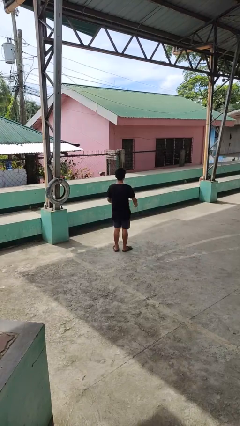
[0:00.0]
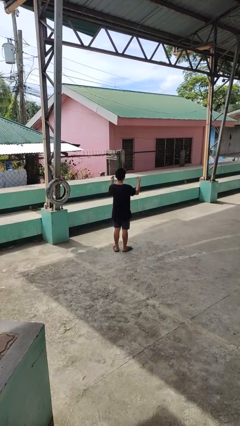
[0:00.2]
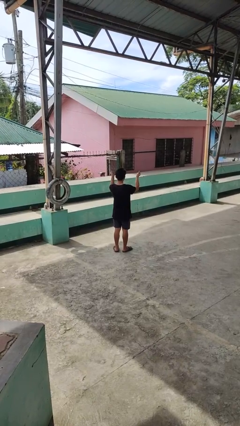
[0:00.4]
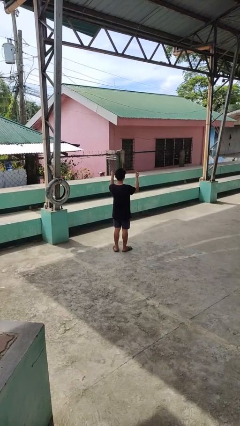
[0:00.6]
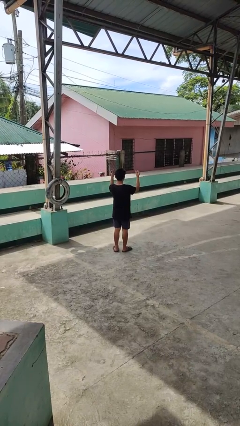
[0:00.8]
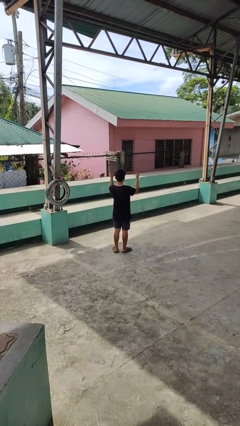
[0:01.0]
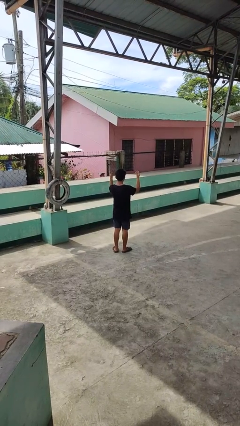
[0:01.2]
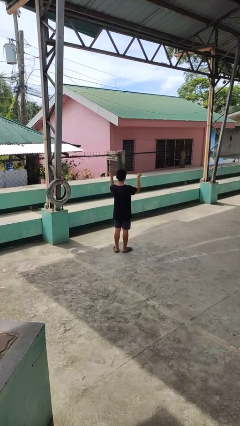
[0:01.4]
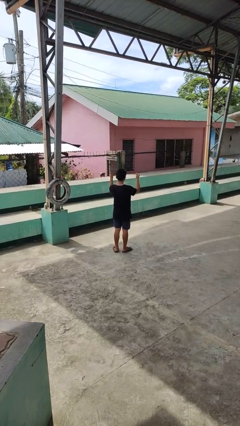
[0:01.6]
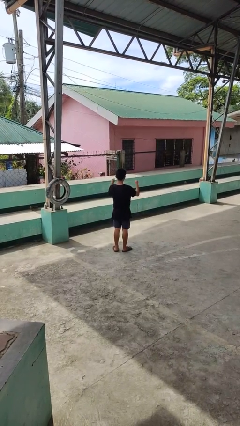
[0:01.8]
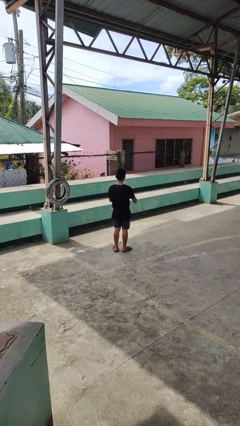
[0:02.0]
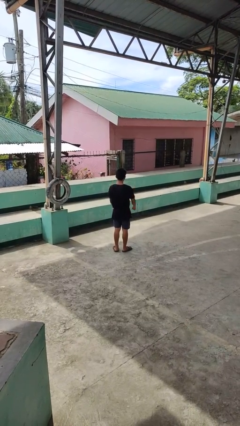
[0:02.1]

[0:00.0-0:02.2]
person snaps fingers

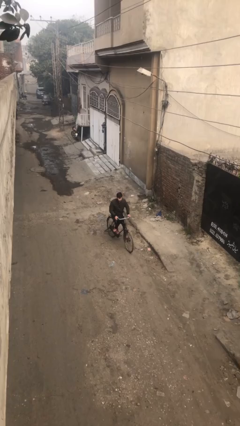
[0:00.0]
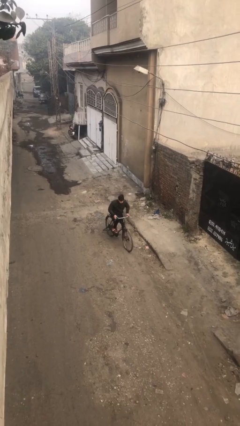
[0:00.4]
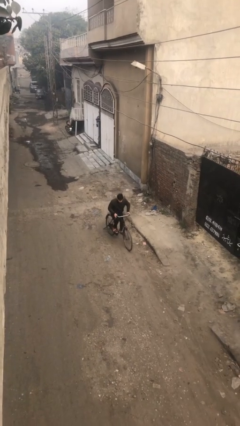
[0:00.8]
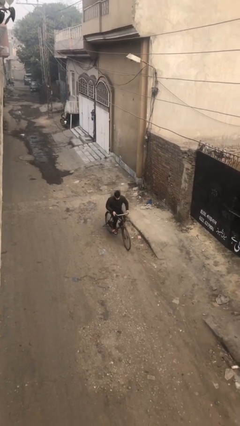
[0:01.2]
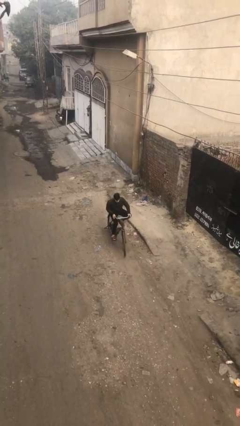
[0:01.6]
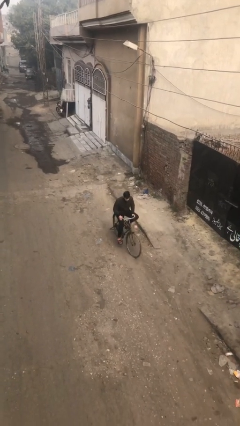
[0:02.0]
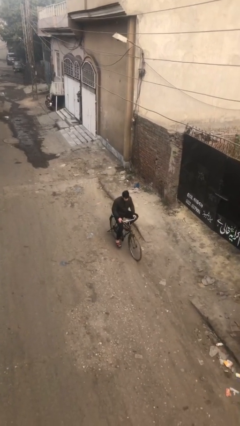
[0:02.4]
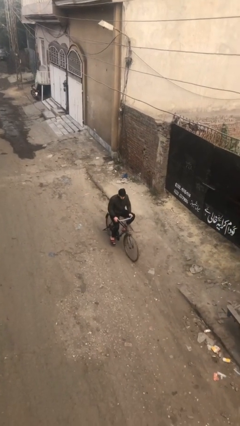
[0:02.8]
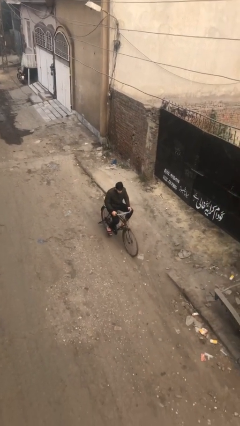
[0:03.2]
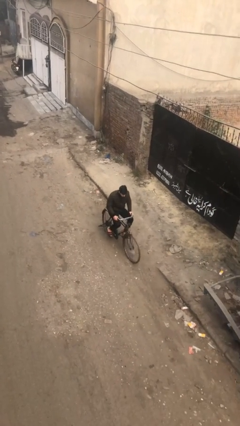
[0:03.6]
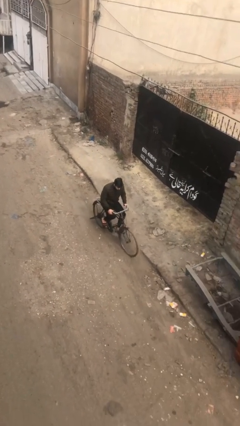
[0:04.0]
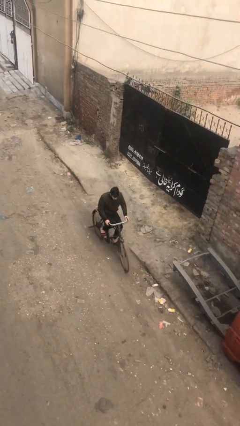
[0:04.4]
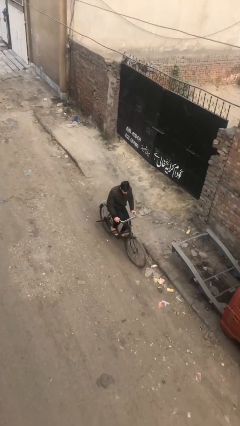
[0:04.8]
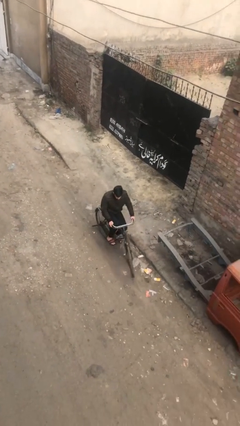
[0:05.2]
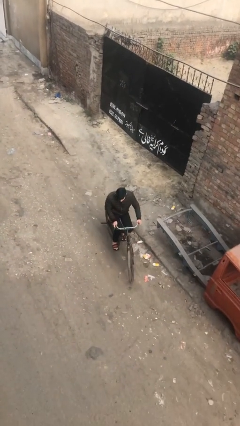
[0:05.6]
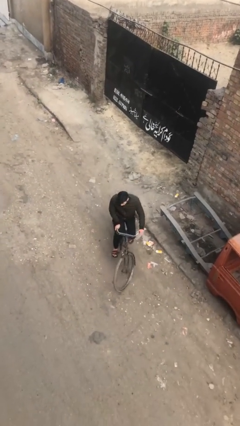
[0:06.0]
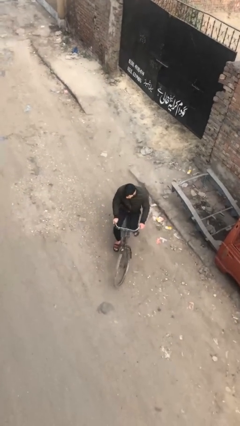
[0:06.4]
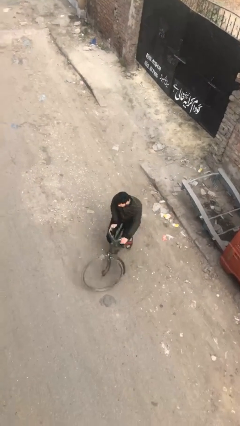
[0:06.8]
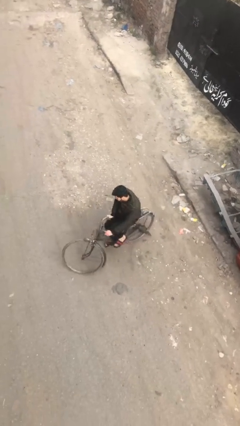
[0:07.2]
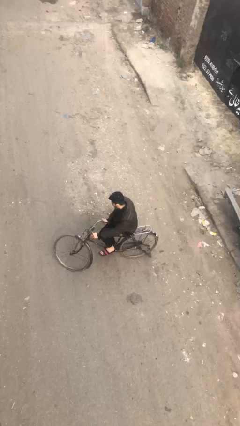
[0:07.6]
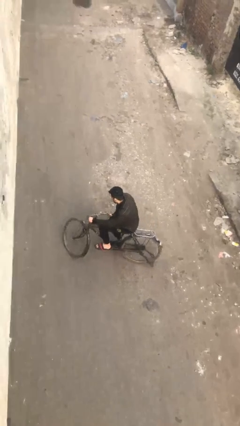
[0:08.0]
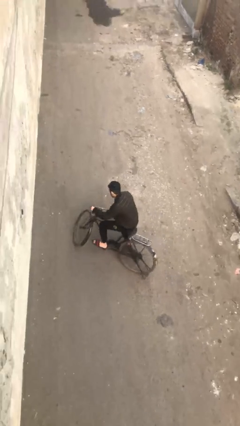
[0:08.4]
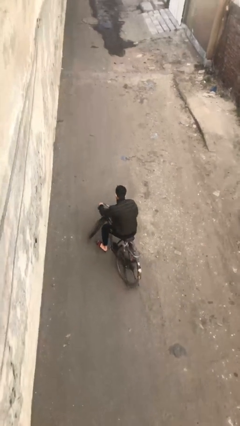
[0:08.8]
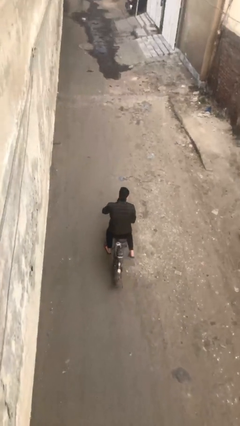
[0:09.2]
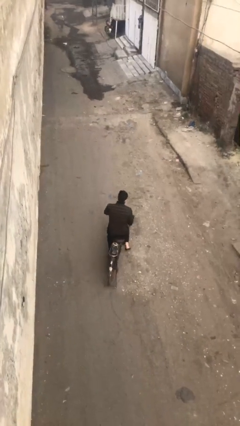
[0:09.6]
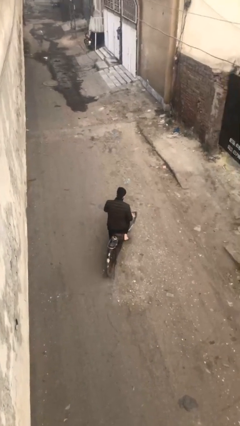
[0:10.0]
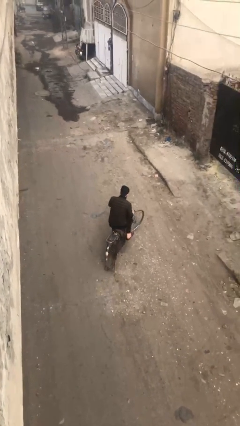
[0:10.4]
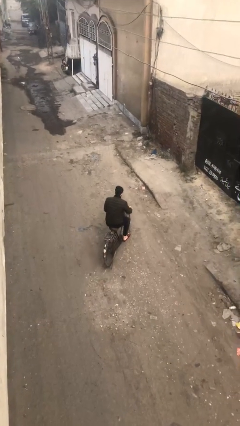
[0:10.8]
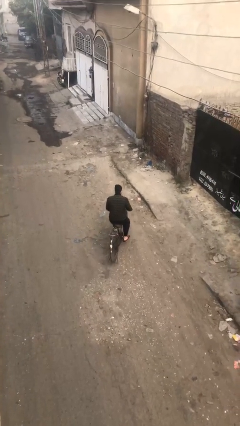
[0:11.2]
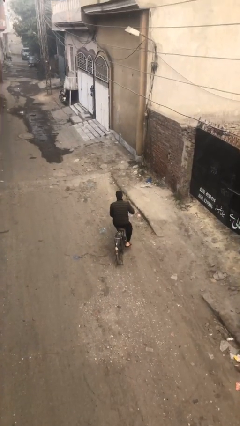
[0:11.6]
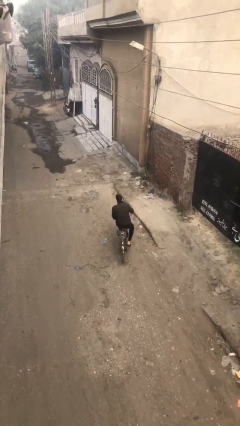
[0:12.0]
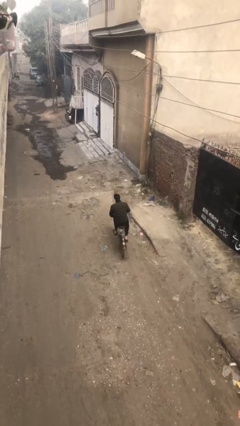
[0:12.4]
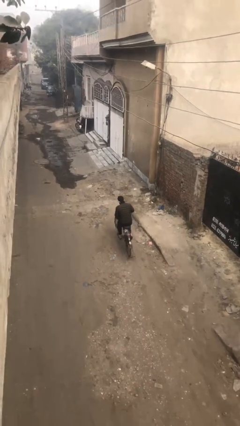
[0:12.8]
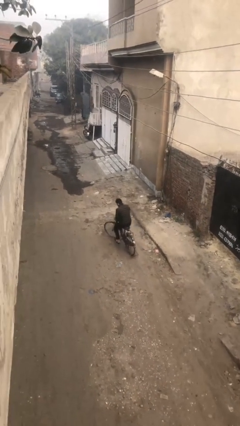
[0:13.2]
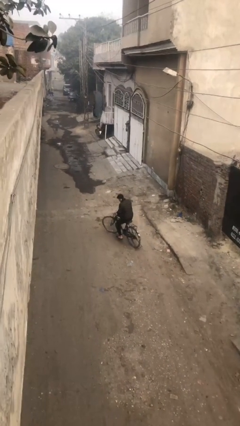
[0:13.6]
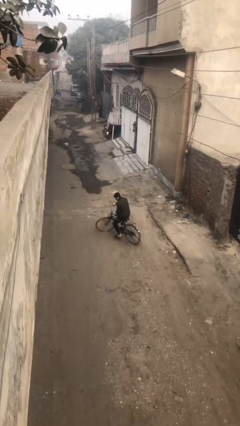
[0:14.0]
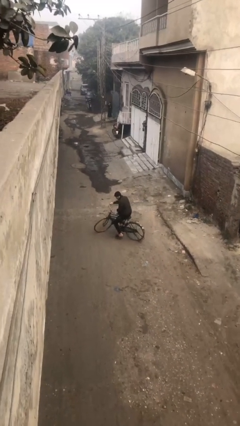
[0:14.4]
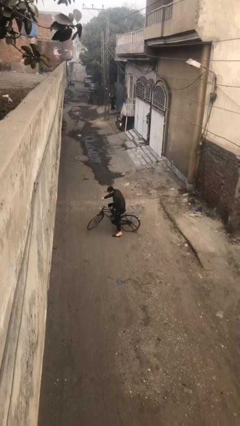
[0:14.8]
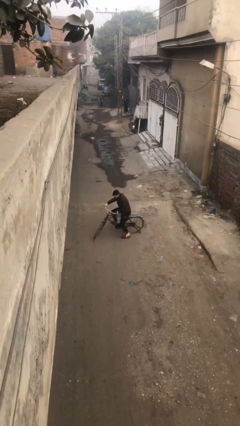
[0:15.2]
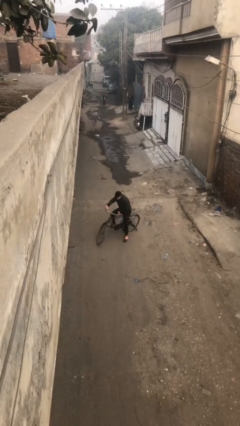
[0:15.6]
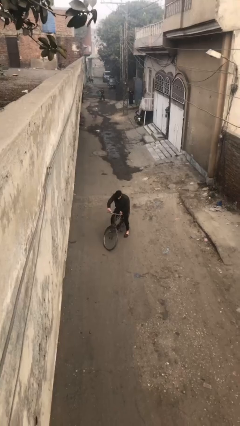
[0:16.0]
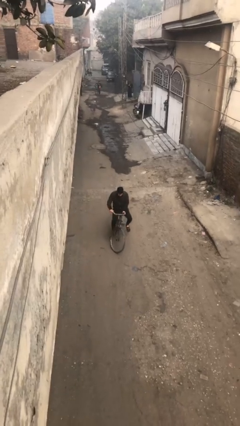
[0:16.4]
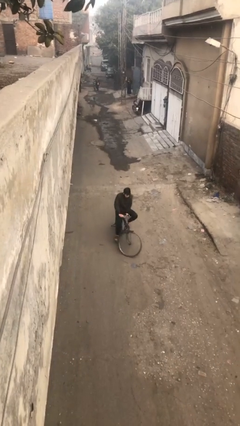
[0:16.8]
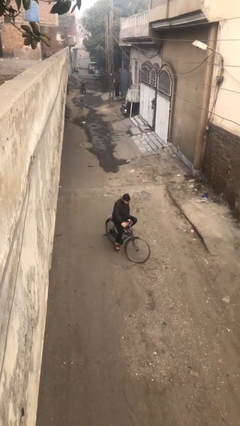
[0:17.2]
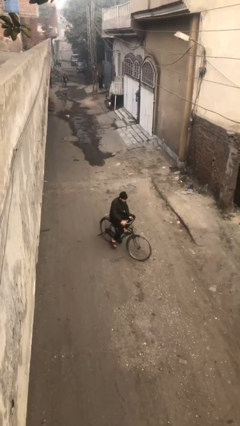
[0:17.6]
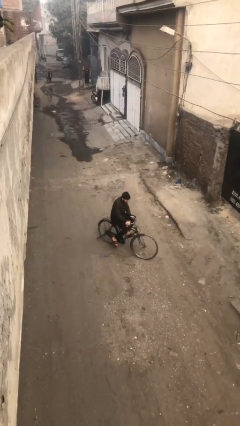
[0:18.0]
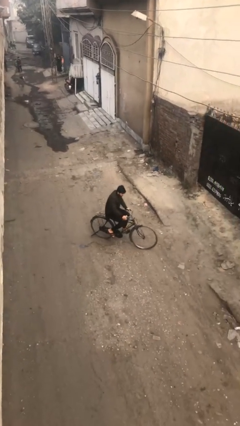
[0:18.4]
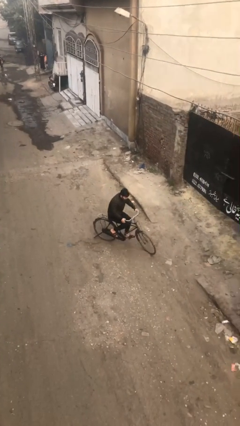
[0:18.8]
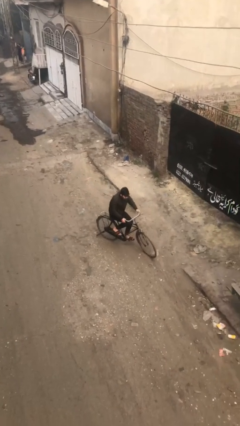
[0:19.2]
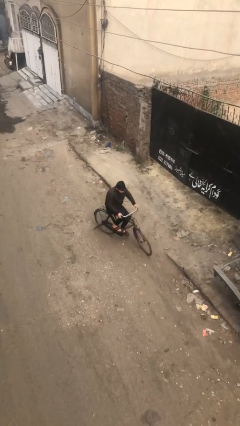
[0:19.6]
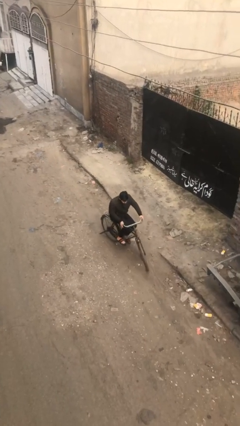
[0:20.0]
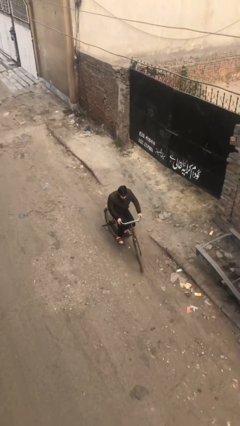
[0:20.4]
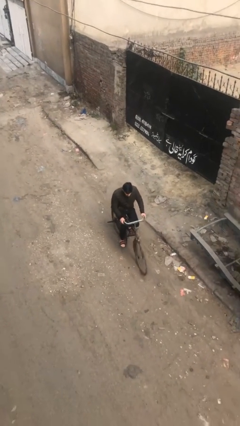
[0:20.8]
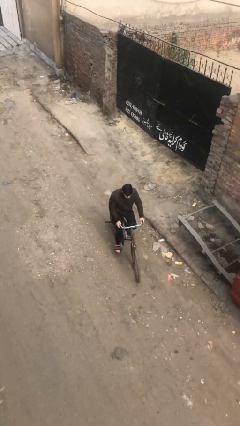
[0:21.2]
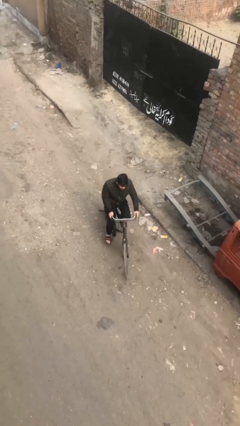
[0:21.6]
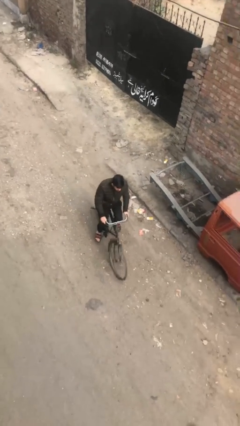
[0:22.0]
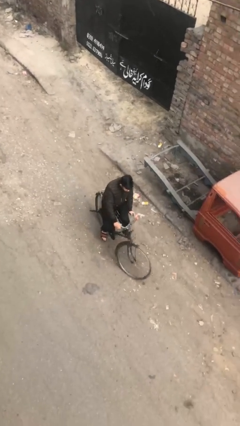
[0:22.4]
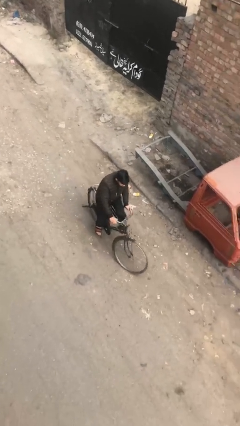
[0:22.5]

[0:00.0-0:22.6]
person rides bicycle

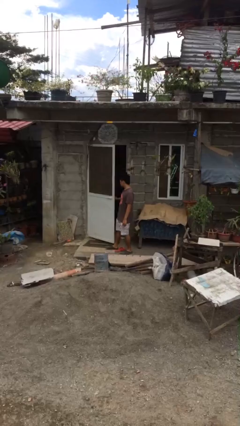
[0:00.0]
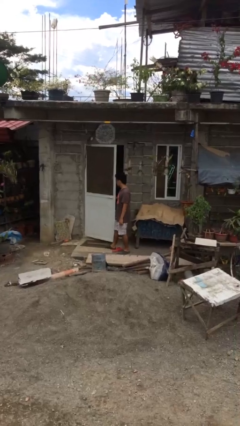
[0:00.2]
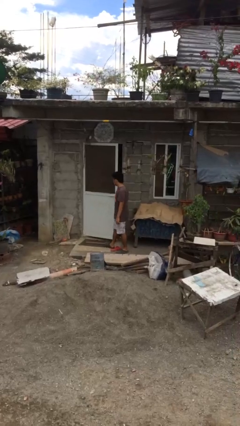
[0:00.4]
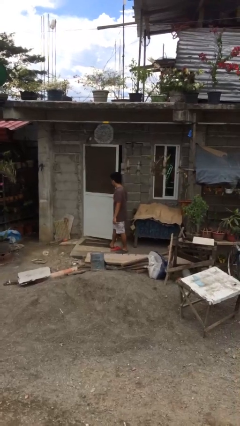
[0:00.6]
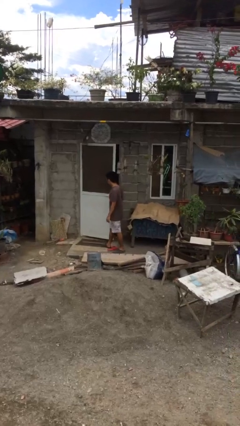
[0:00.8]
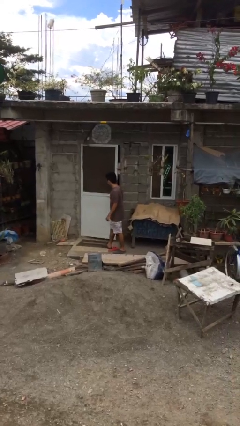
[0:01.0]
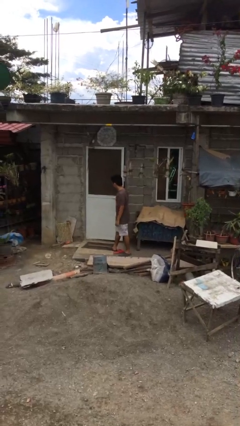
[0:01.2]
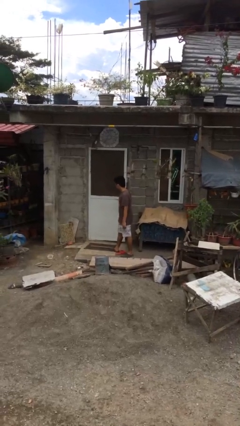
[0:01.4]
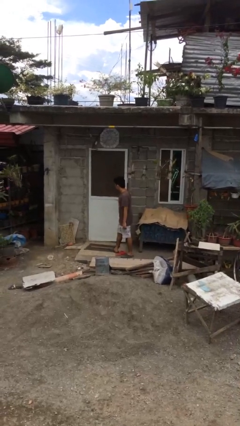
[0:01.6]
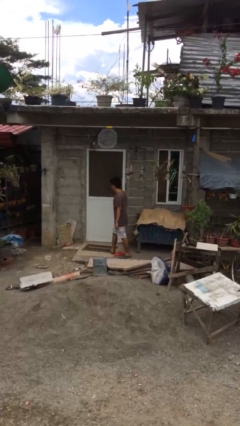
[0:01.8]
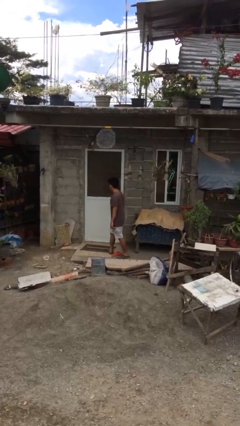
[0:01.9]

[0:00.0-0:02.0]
person closes facility door

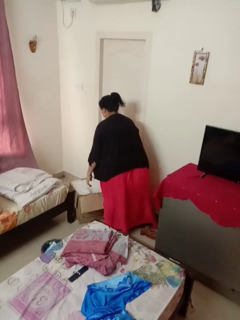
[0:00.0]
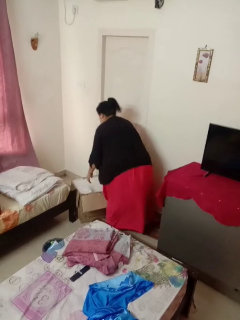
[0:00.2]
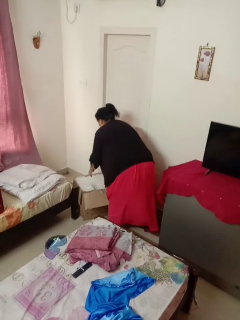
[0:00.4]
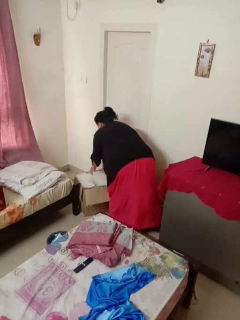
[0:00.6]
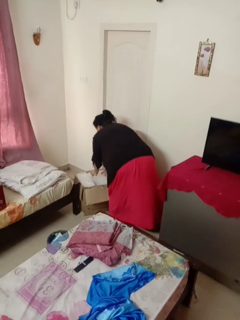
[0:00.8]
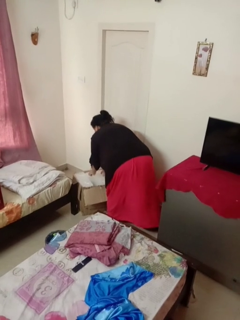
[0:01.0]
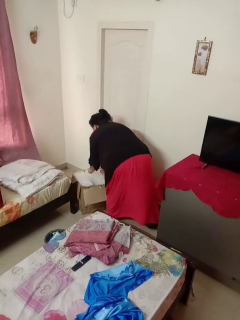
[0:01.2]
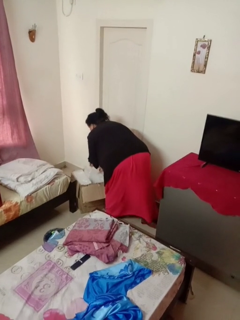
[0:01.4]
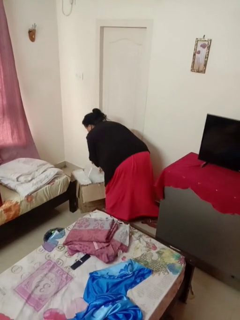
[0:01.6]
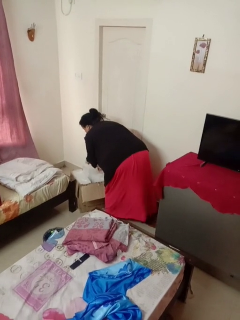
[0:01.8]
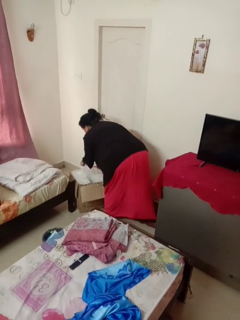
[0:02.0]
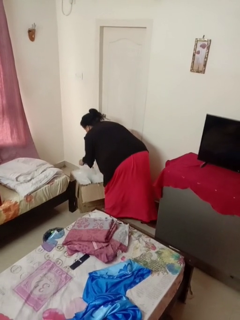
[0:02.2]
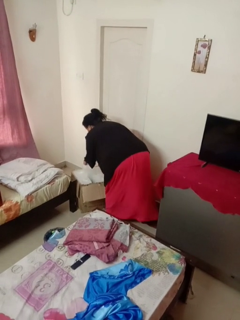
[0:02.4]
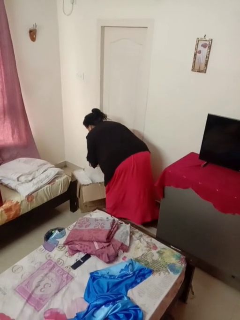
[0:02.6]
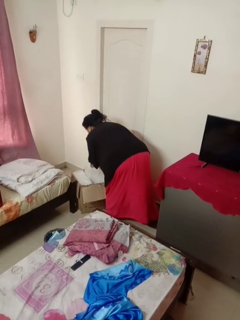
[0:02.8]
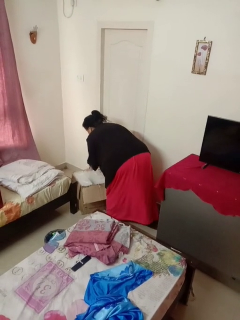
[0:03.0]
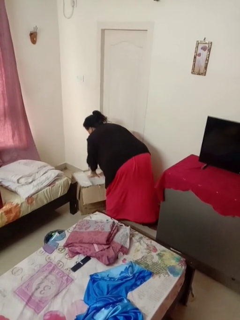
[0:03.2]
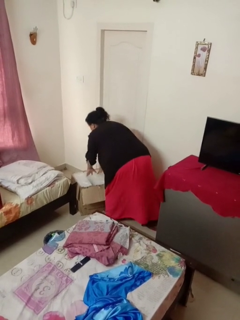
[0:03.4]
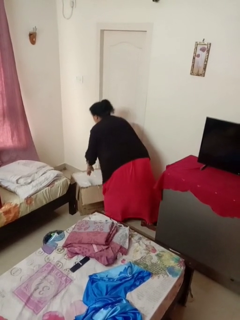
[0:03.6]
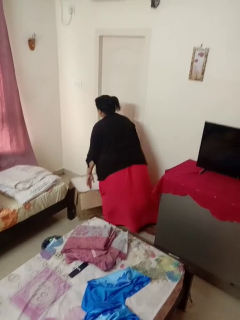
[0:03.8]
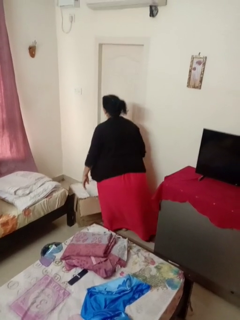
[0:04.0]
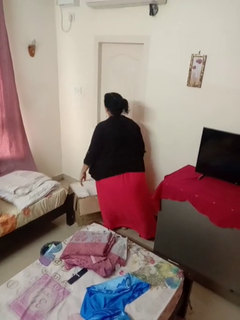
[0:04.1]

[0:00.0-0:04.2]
person searches in box
